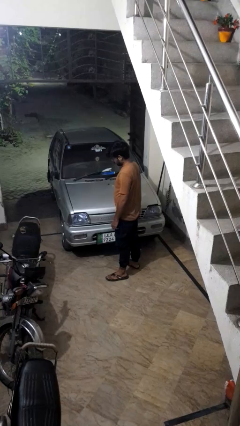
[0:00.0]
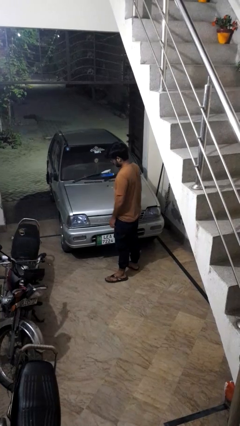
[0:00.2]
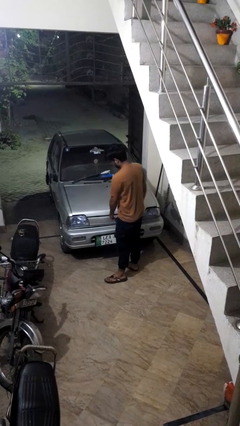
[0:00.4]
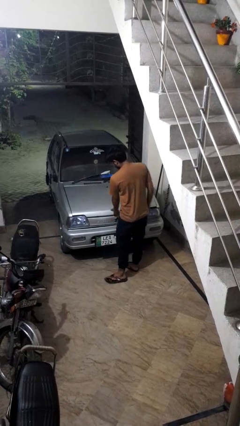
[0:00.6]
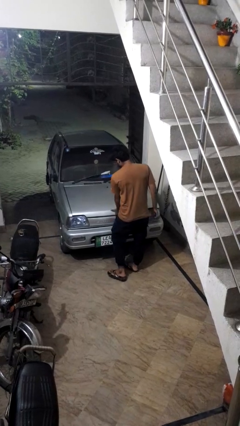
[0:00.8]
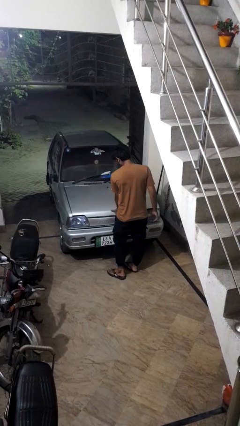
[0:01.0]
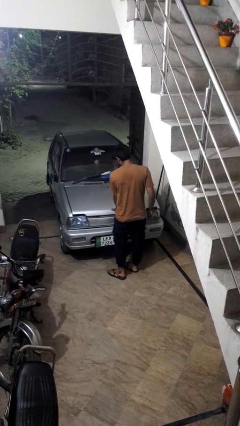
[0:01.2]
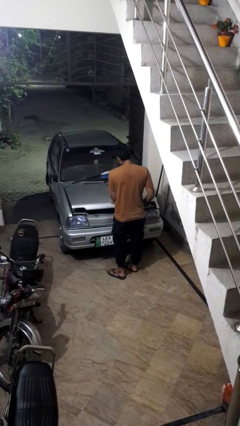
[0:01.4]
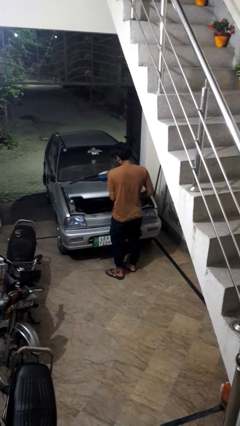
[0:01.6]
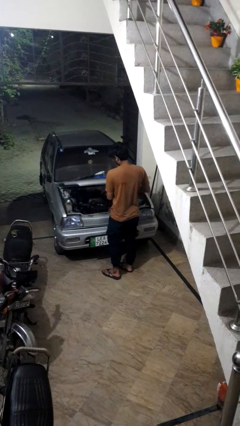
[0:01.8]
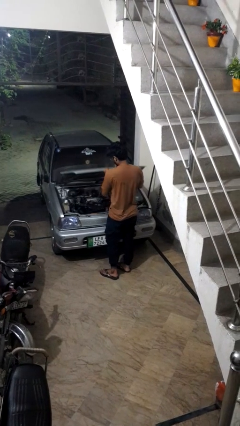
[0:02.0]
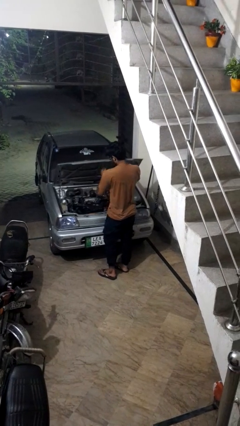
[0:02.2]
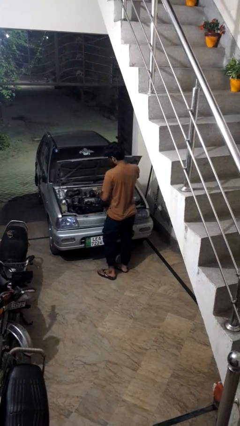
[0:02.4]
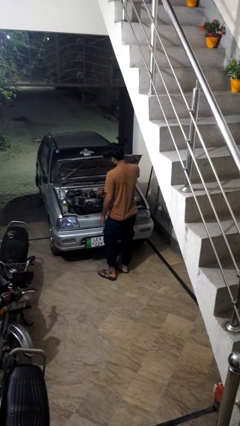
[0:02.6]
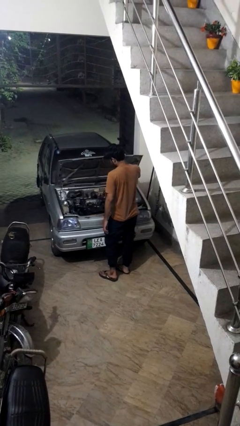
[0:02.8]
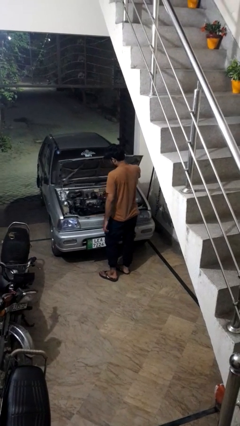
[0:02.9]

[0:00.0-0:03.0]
person opens car hood

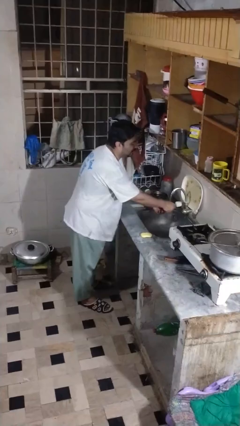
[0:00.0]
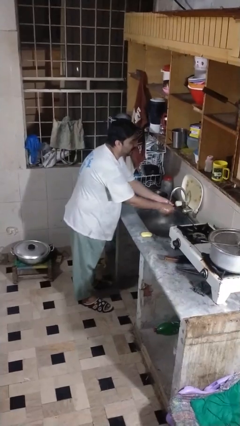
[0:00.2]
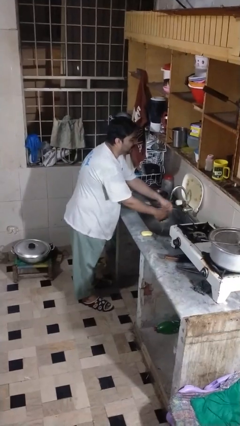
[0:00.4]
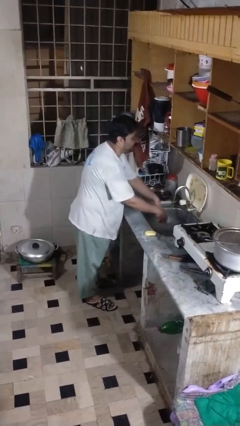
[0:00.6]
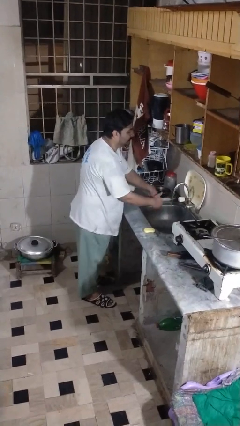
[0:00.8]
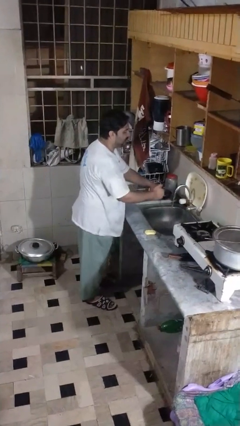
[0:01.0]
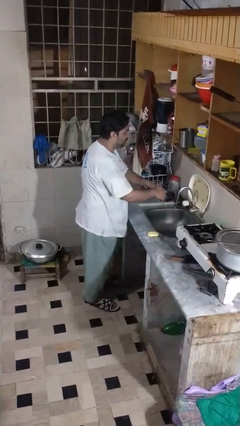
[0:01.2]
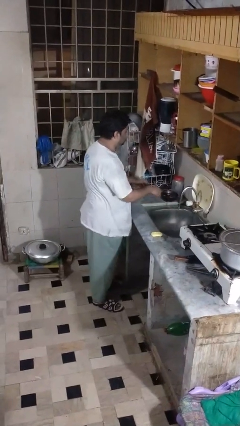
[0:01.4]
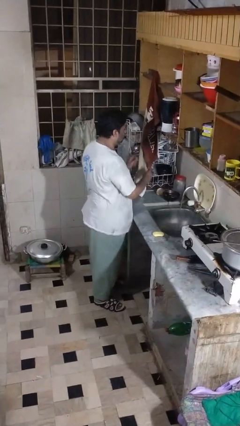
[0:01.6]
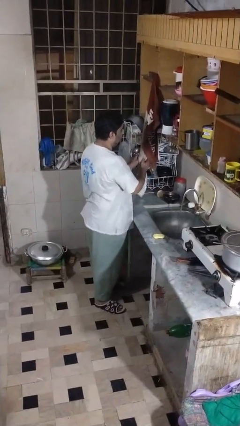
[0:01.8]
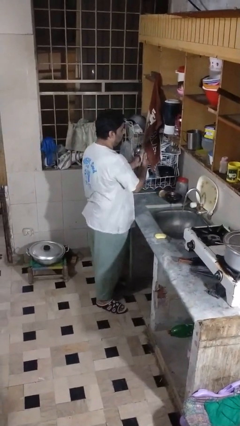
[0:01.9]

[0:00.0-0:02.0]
person dries hands with towel

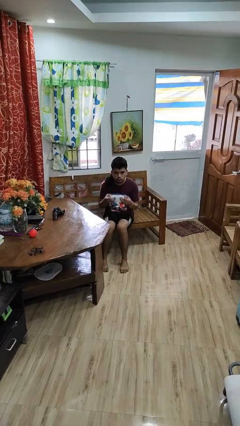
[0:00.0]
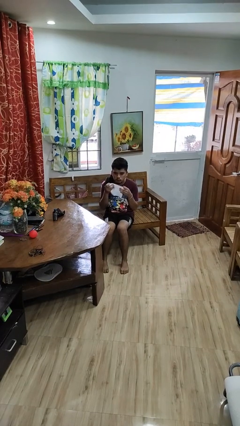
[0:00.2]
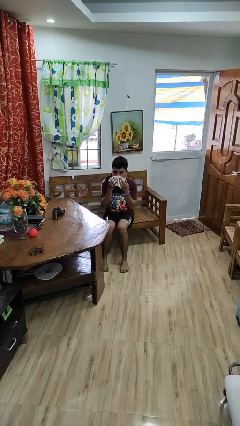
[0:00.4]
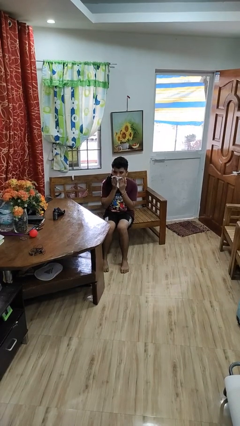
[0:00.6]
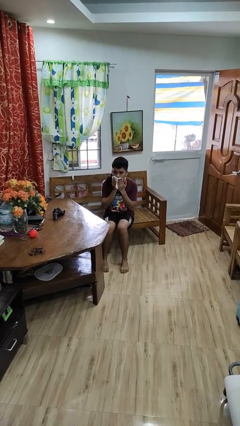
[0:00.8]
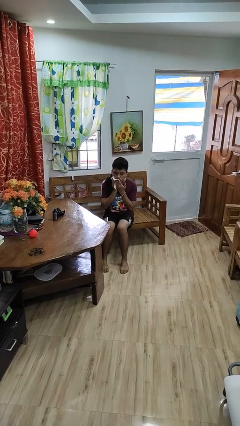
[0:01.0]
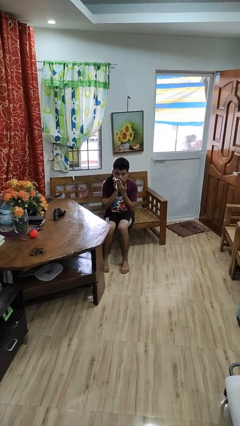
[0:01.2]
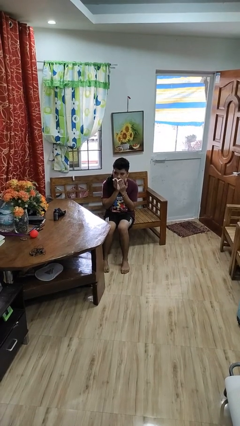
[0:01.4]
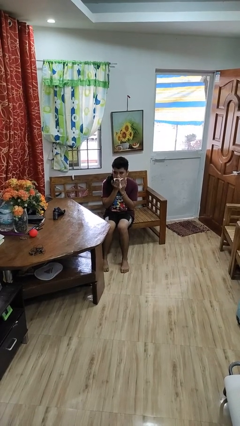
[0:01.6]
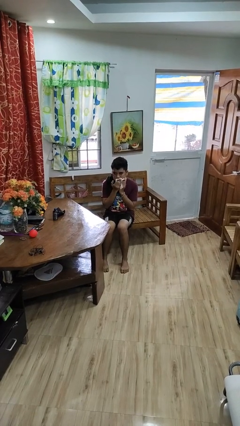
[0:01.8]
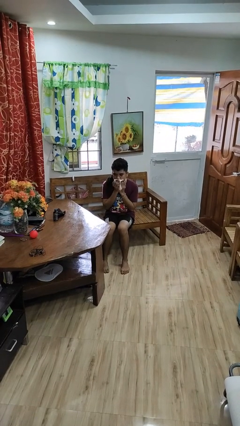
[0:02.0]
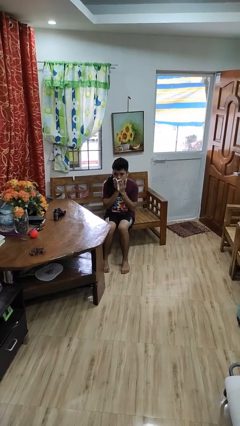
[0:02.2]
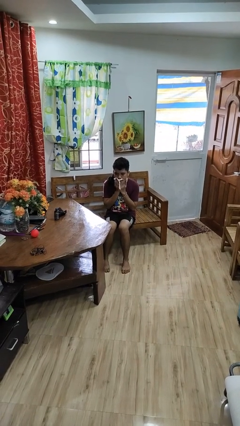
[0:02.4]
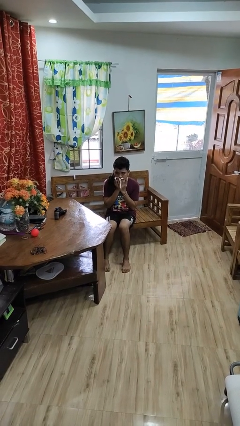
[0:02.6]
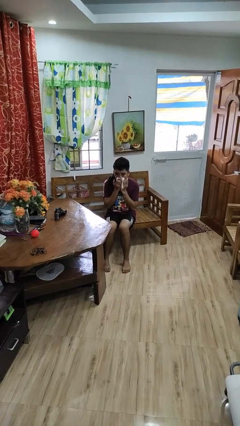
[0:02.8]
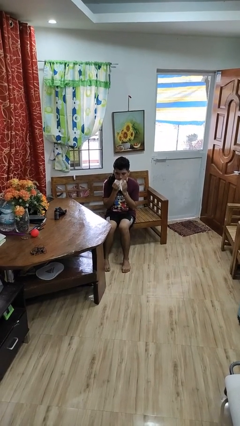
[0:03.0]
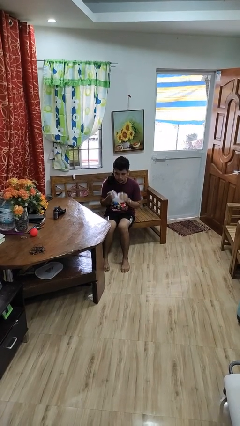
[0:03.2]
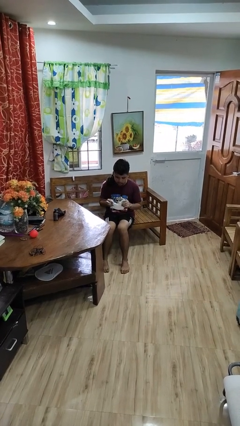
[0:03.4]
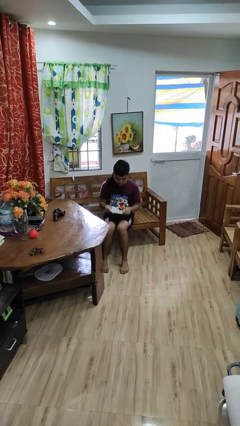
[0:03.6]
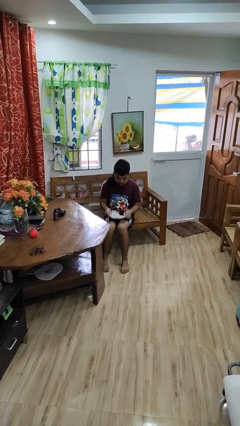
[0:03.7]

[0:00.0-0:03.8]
person wipes mouth with napkin

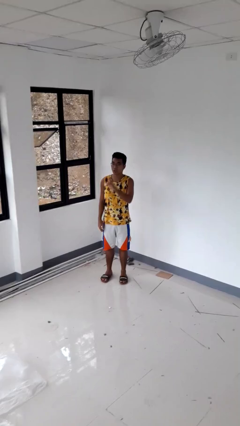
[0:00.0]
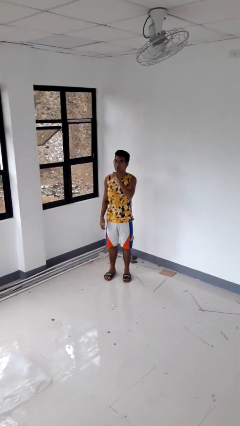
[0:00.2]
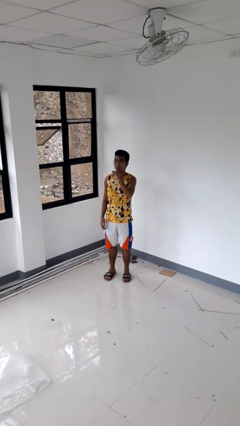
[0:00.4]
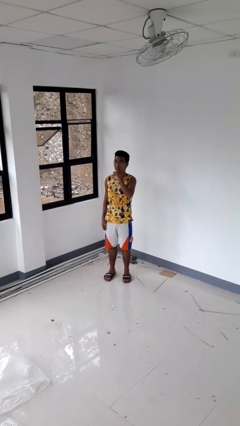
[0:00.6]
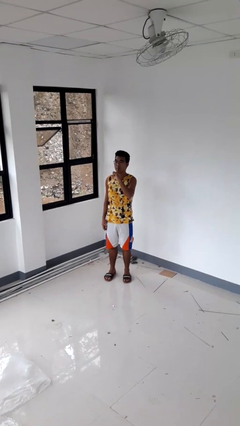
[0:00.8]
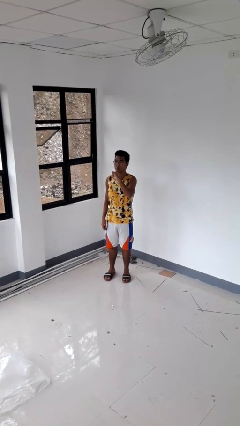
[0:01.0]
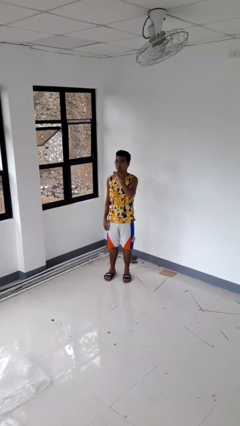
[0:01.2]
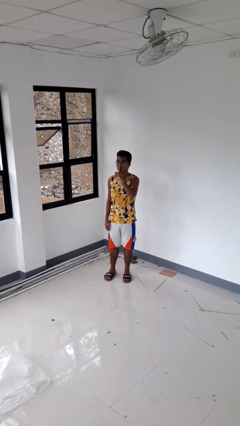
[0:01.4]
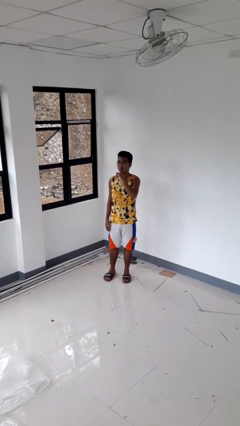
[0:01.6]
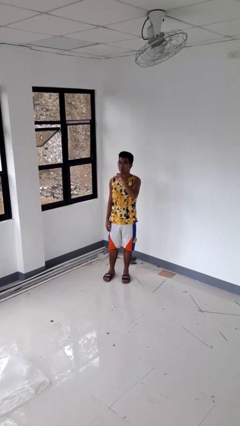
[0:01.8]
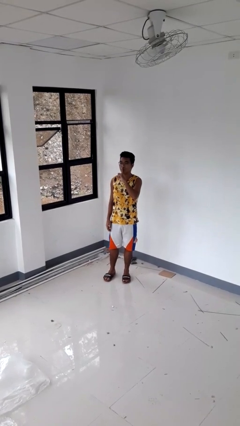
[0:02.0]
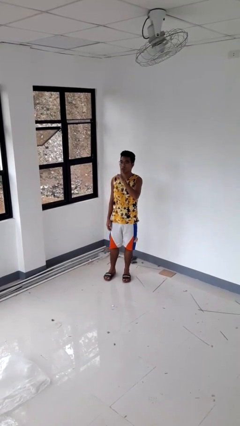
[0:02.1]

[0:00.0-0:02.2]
person gestures be quiet

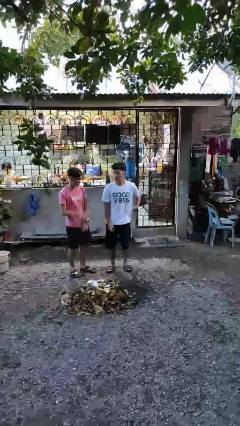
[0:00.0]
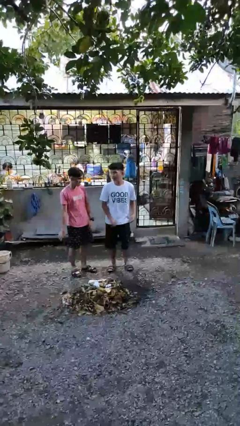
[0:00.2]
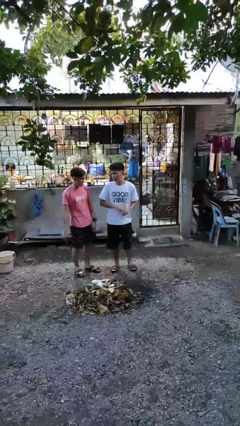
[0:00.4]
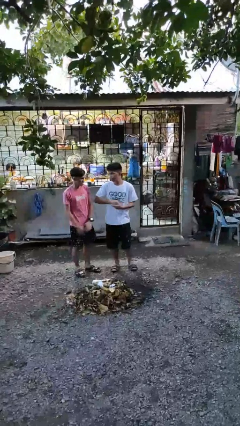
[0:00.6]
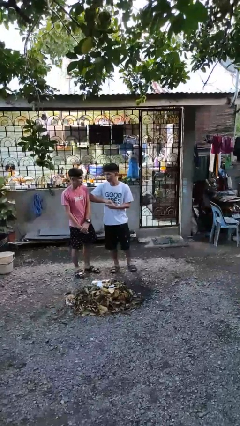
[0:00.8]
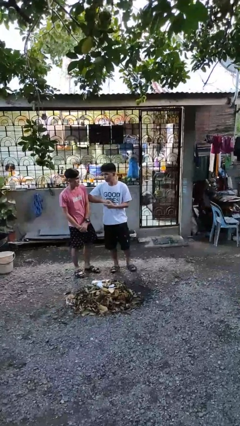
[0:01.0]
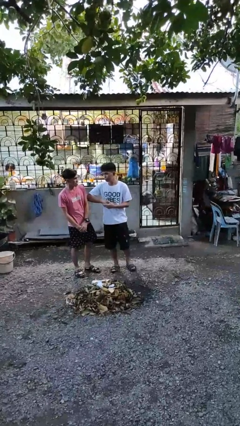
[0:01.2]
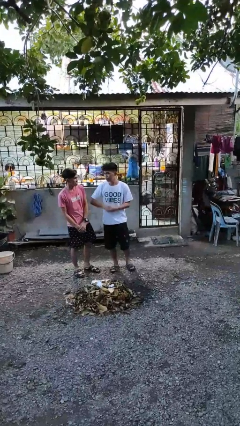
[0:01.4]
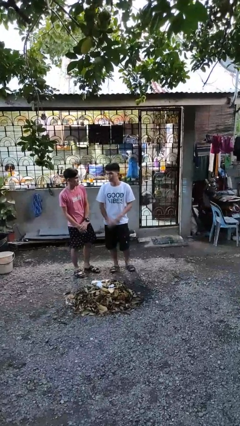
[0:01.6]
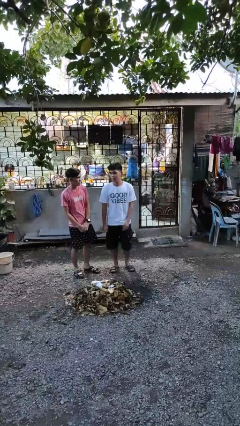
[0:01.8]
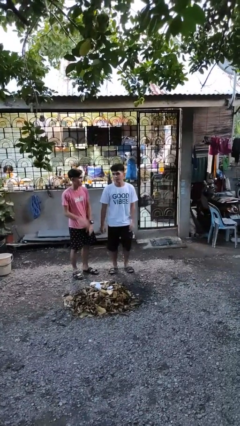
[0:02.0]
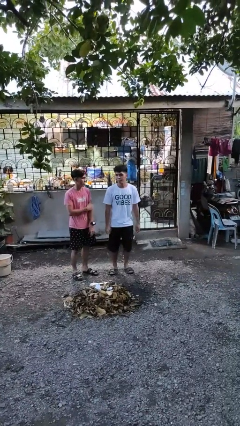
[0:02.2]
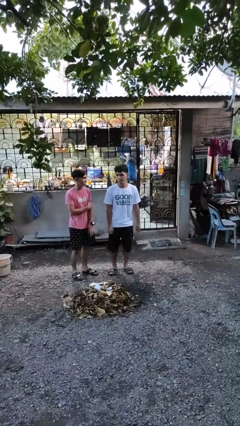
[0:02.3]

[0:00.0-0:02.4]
person nudges person with elbow

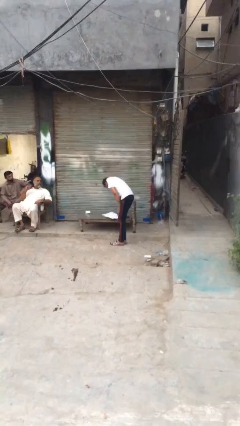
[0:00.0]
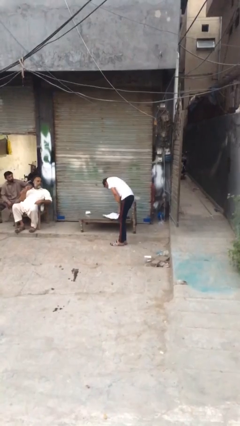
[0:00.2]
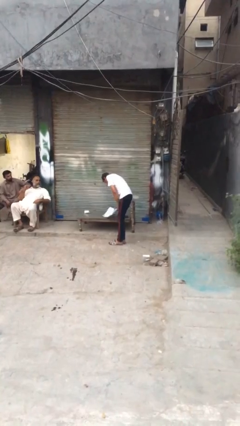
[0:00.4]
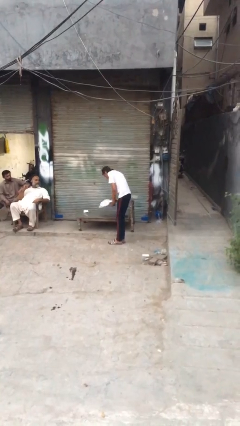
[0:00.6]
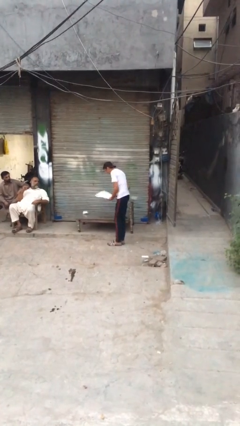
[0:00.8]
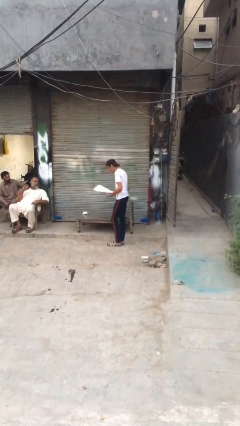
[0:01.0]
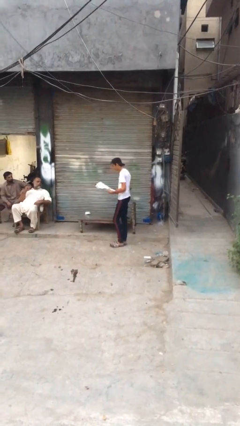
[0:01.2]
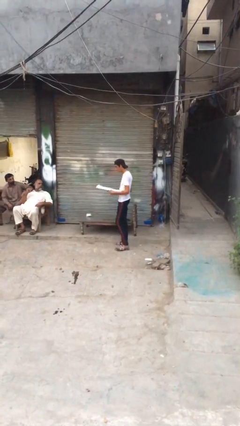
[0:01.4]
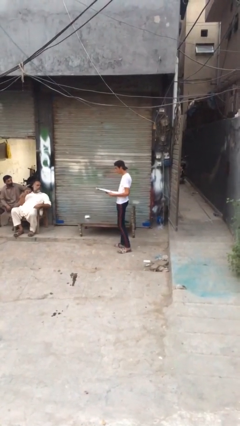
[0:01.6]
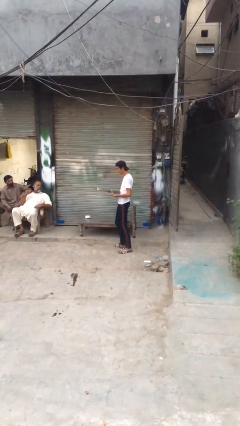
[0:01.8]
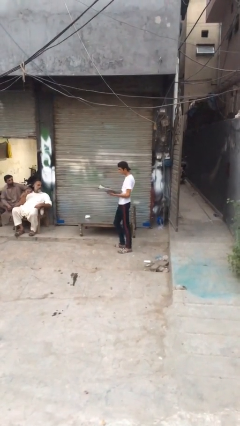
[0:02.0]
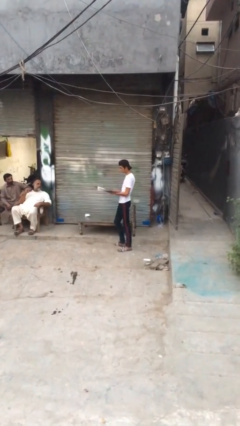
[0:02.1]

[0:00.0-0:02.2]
person picks up object from table

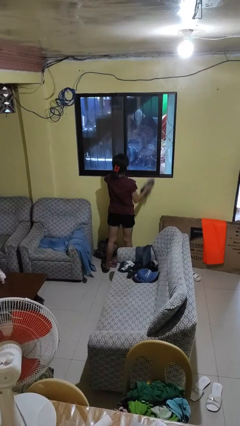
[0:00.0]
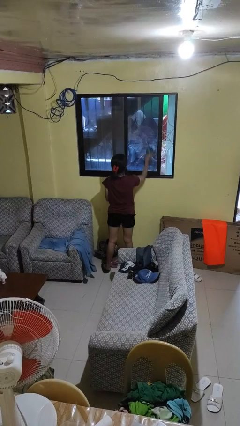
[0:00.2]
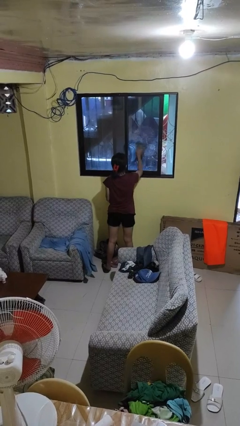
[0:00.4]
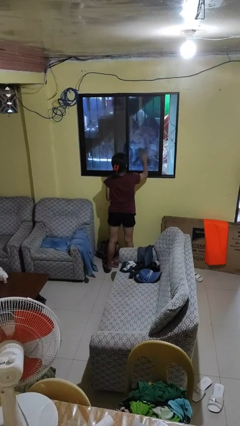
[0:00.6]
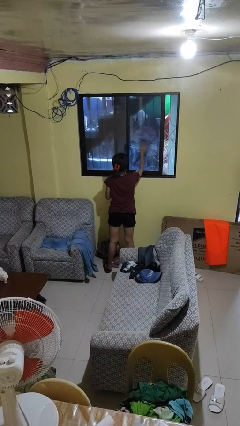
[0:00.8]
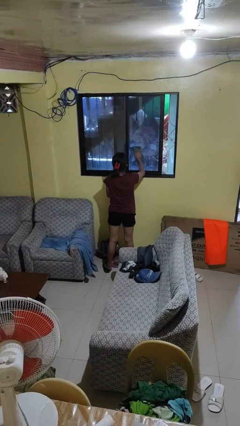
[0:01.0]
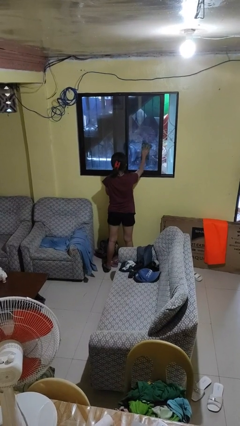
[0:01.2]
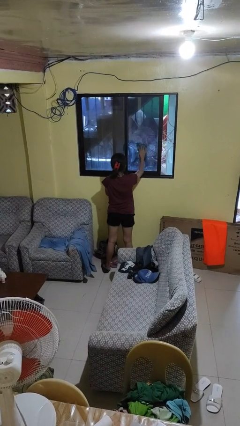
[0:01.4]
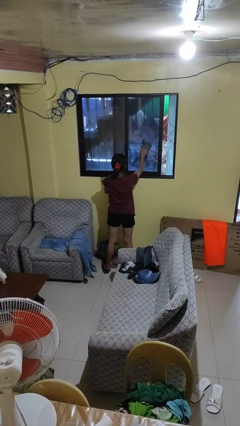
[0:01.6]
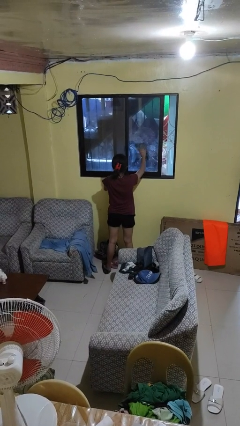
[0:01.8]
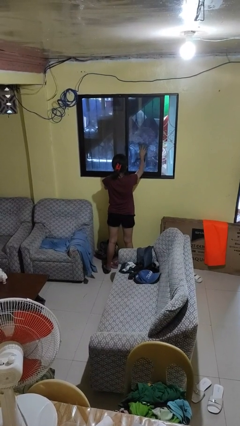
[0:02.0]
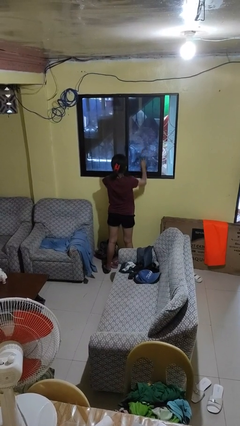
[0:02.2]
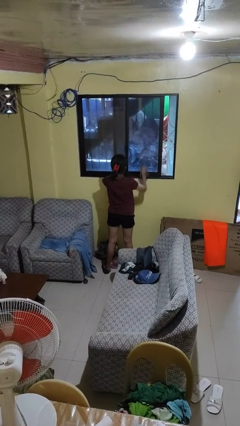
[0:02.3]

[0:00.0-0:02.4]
person washes window
